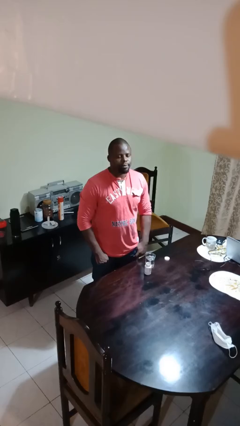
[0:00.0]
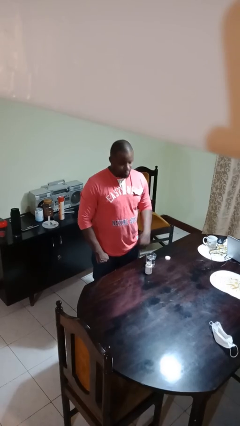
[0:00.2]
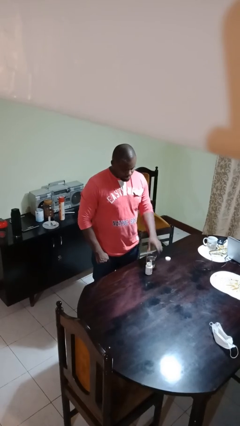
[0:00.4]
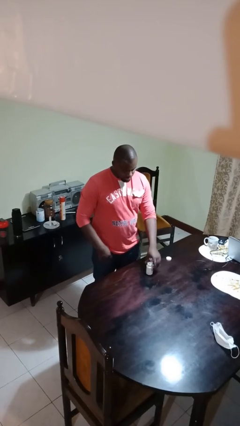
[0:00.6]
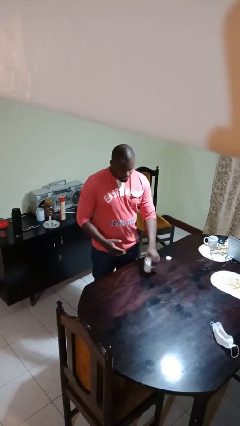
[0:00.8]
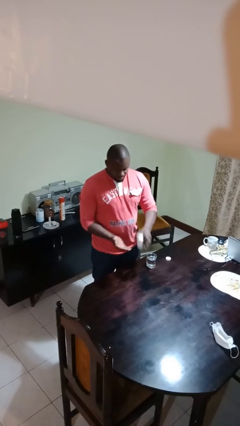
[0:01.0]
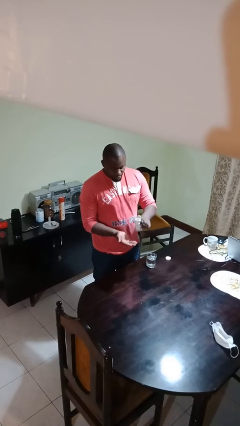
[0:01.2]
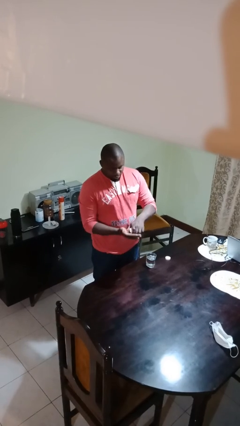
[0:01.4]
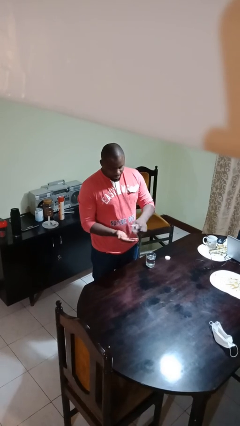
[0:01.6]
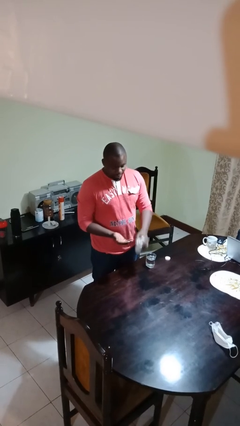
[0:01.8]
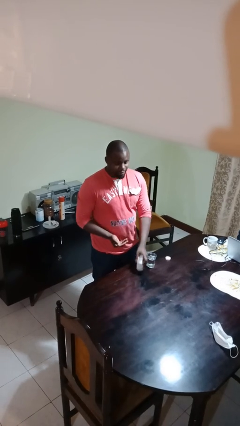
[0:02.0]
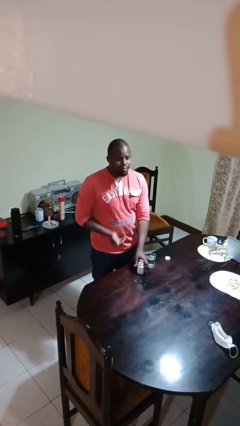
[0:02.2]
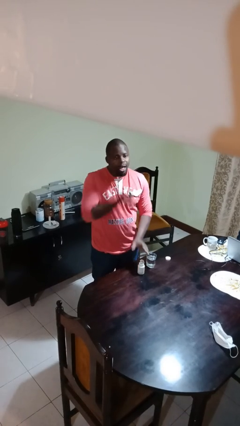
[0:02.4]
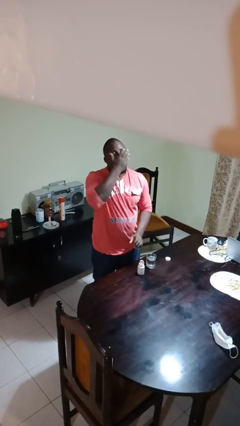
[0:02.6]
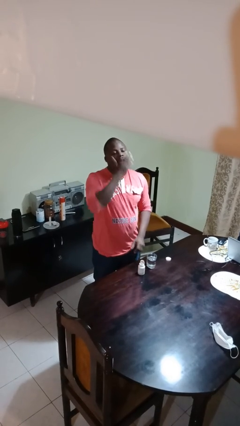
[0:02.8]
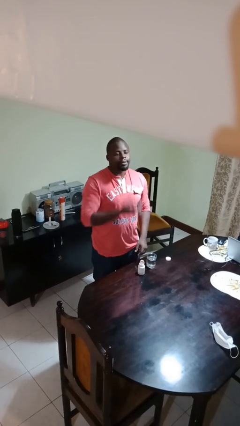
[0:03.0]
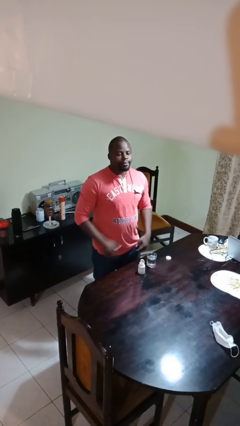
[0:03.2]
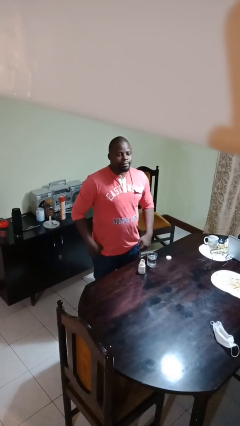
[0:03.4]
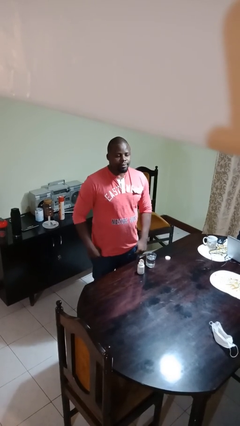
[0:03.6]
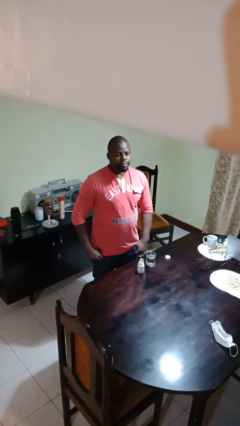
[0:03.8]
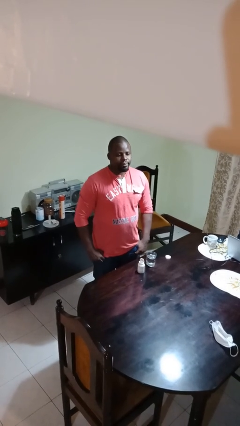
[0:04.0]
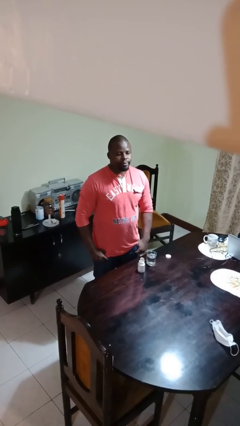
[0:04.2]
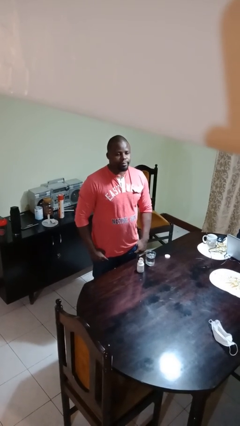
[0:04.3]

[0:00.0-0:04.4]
person takes medicine pills

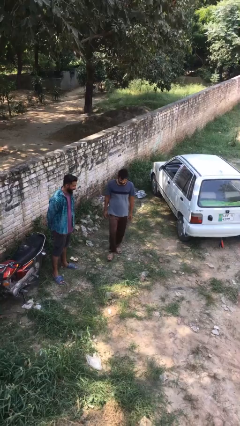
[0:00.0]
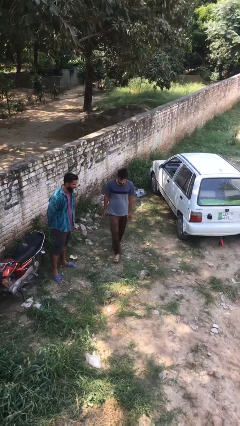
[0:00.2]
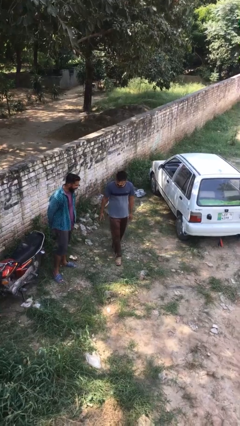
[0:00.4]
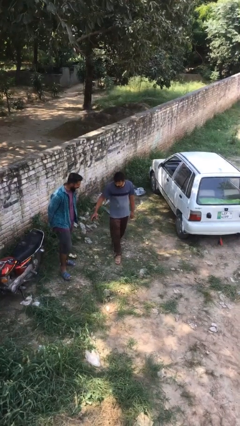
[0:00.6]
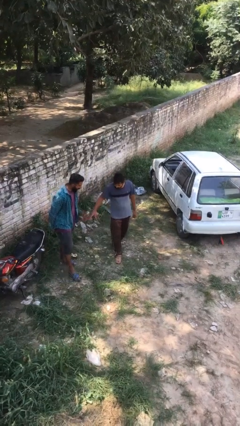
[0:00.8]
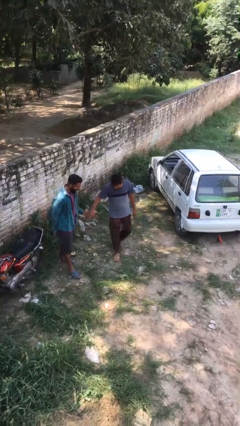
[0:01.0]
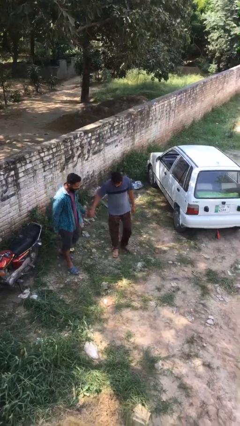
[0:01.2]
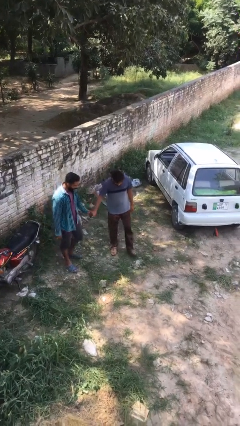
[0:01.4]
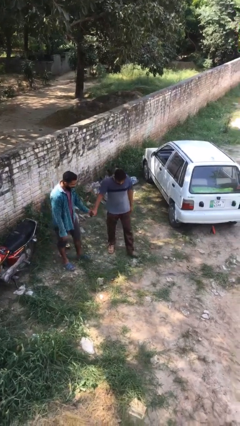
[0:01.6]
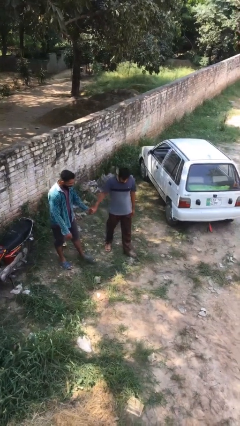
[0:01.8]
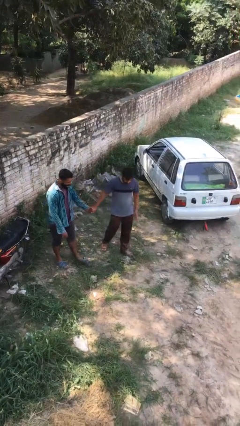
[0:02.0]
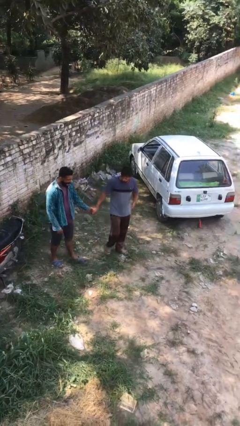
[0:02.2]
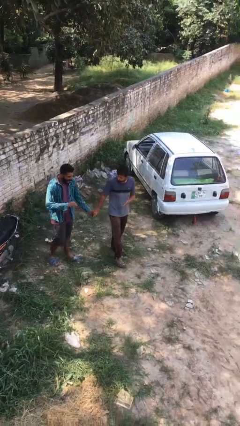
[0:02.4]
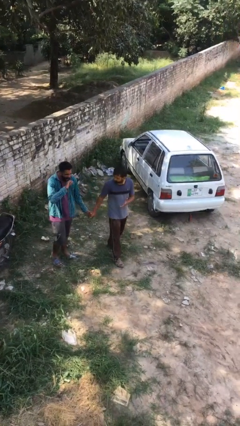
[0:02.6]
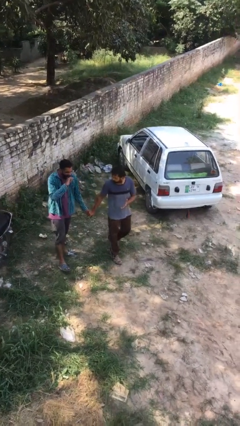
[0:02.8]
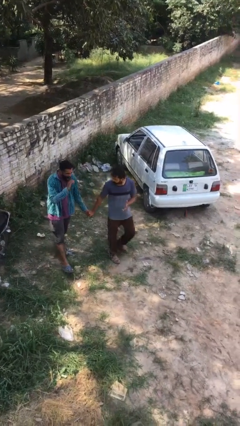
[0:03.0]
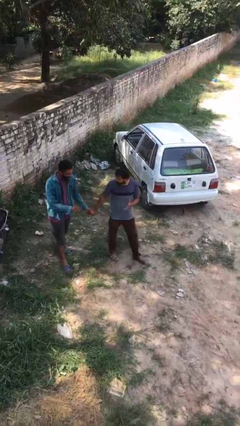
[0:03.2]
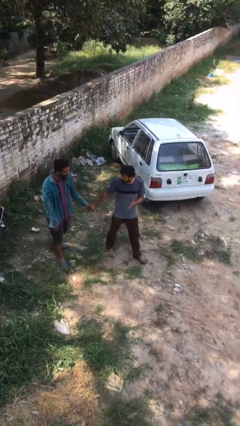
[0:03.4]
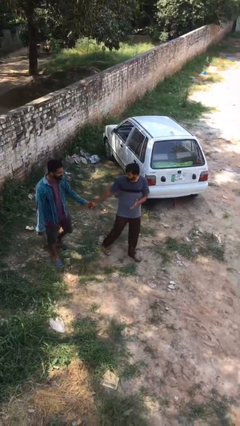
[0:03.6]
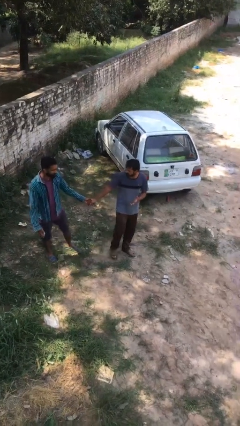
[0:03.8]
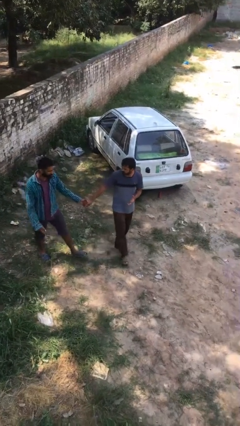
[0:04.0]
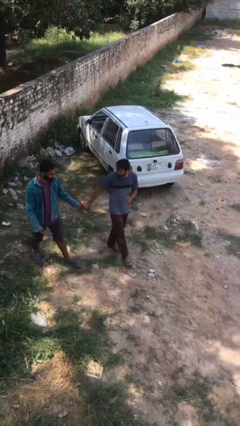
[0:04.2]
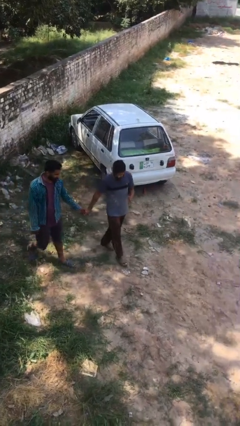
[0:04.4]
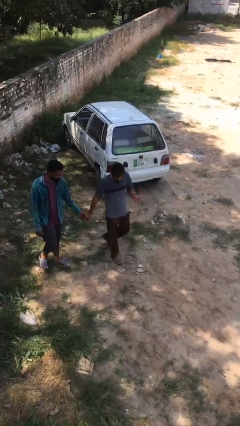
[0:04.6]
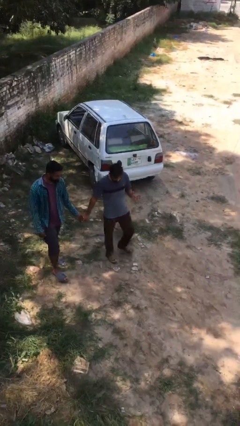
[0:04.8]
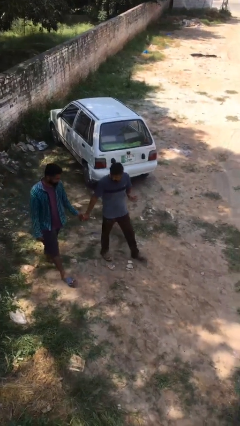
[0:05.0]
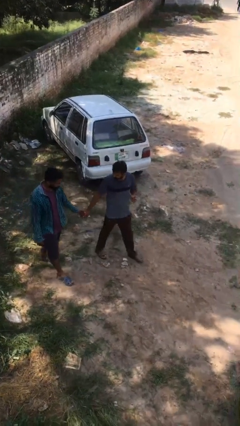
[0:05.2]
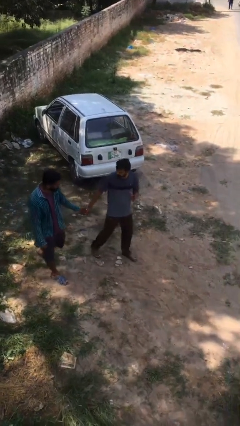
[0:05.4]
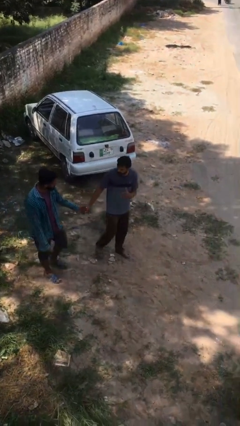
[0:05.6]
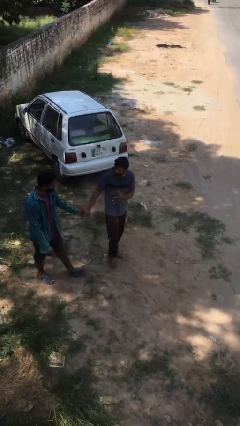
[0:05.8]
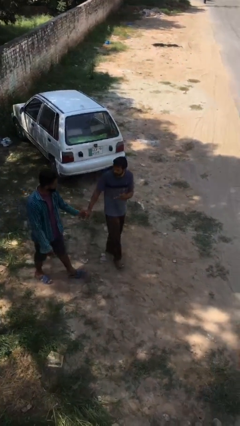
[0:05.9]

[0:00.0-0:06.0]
person holds hand

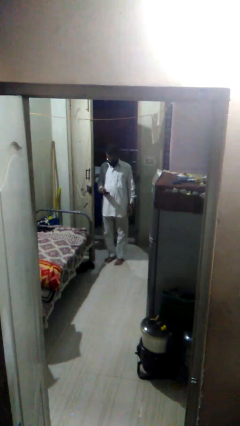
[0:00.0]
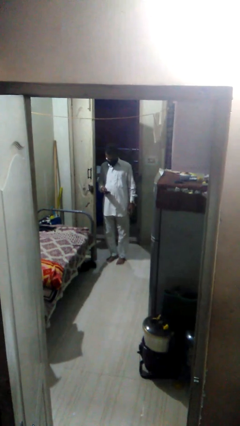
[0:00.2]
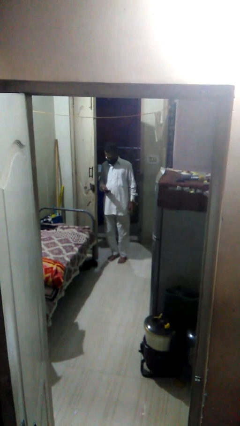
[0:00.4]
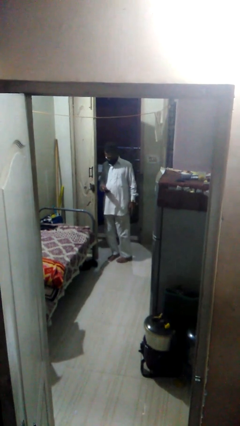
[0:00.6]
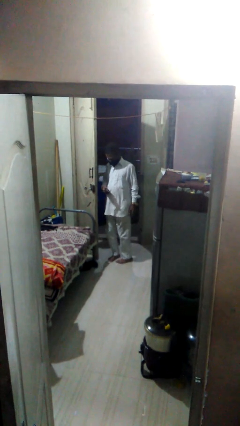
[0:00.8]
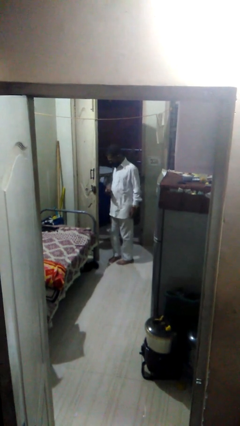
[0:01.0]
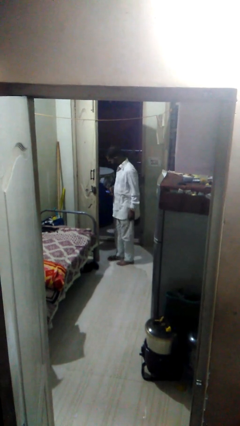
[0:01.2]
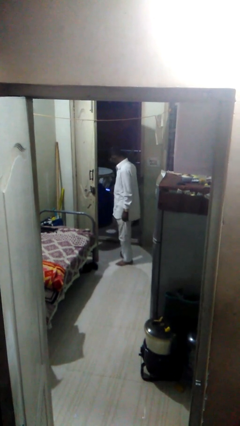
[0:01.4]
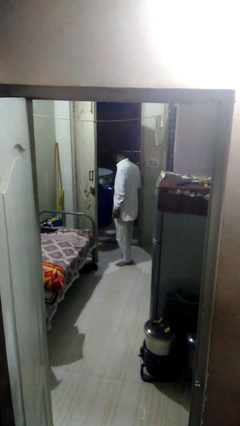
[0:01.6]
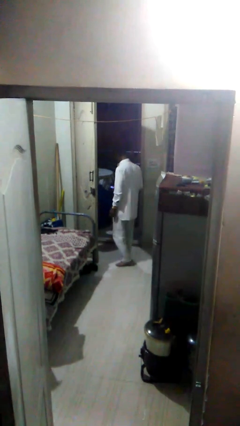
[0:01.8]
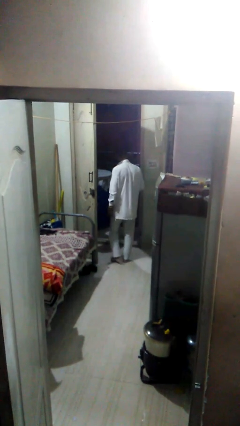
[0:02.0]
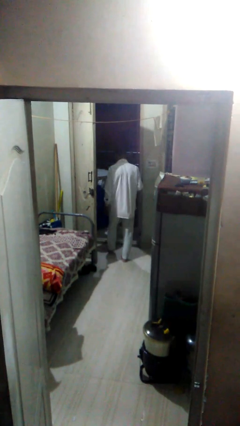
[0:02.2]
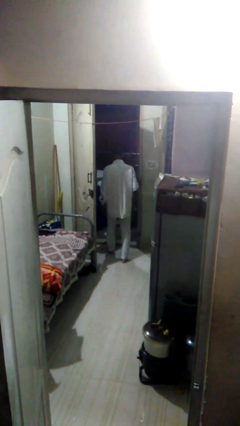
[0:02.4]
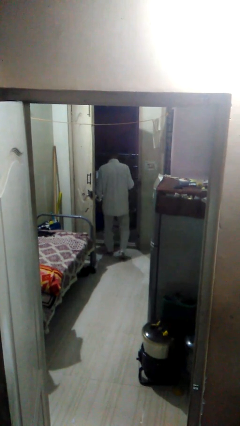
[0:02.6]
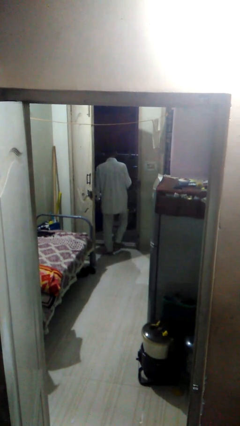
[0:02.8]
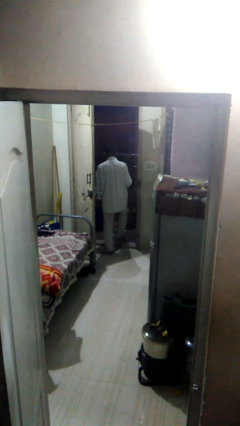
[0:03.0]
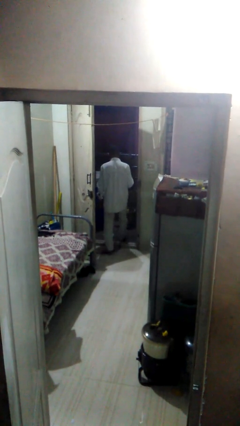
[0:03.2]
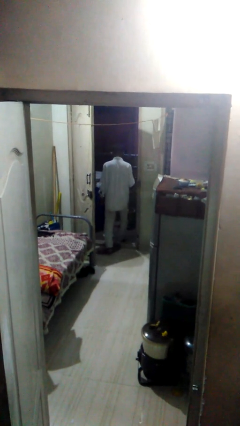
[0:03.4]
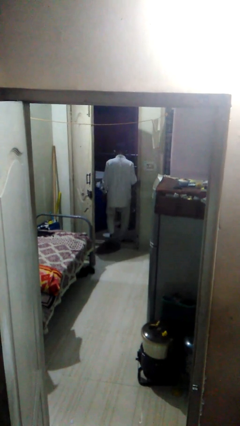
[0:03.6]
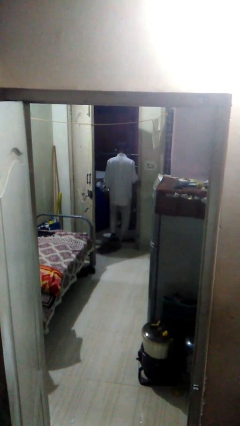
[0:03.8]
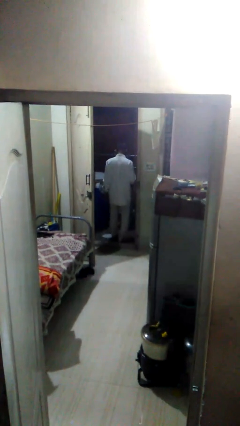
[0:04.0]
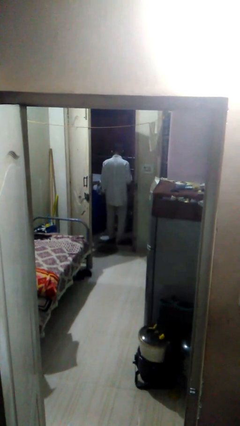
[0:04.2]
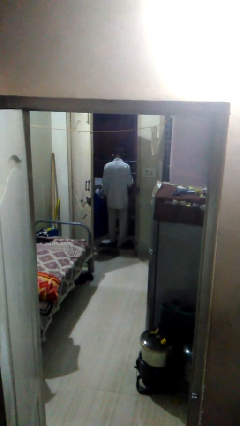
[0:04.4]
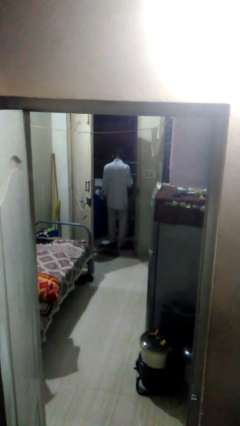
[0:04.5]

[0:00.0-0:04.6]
person exits scene through structure

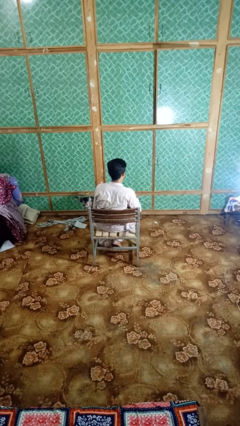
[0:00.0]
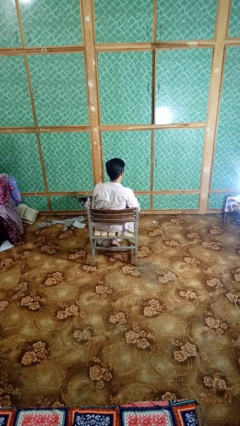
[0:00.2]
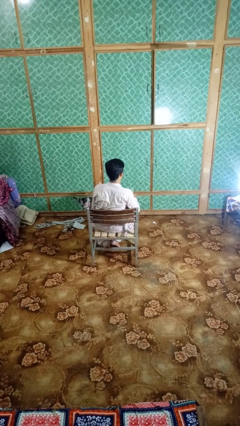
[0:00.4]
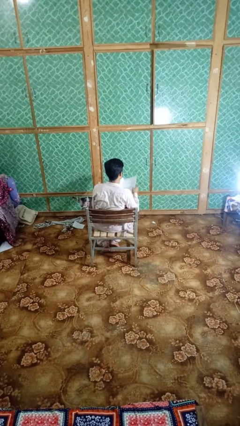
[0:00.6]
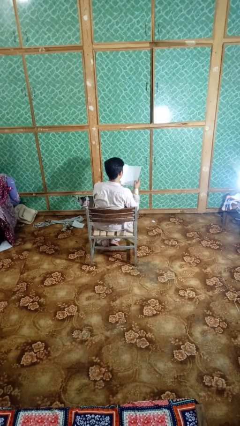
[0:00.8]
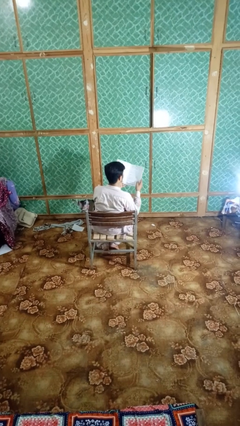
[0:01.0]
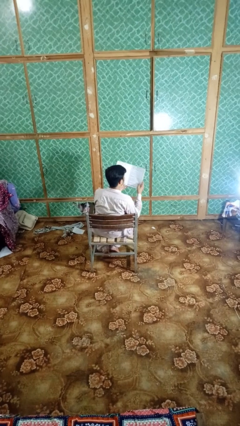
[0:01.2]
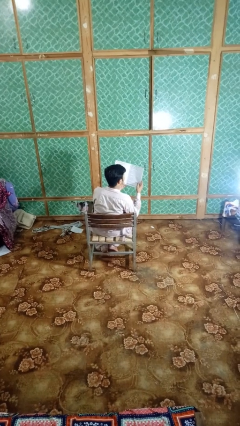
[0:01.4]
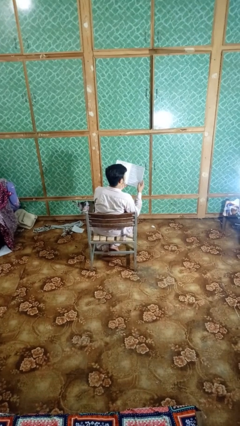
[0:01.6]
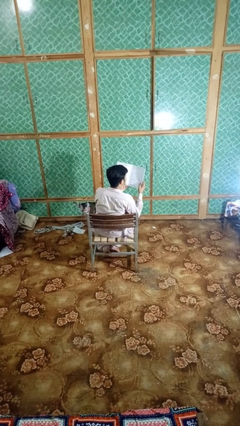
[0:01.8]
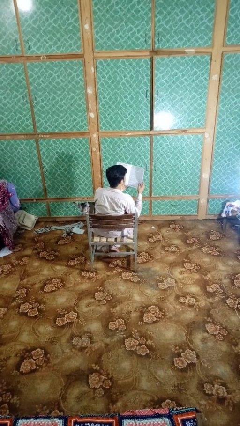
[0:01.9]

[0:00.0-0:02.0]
person reads magazine

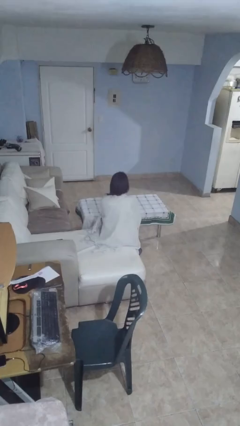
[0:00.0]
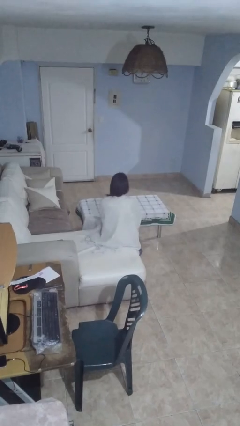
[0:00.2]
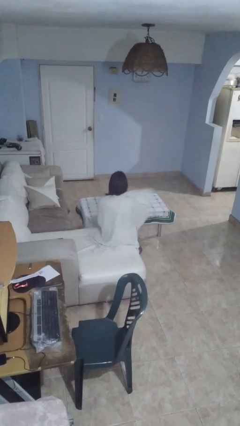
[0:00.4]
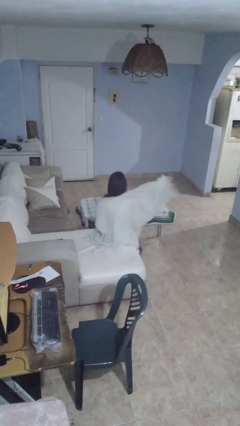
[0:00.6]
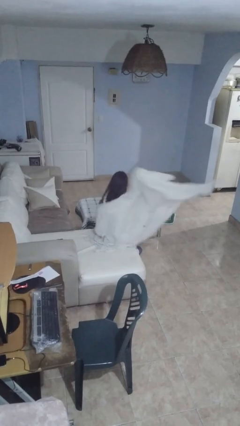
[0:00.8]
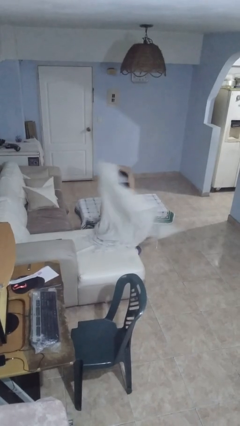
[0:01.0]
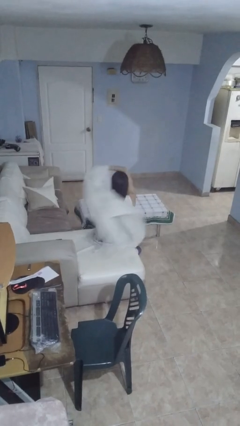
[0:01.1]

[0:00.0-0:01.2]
person uncovers with blanket
